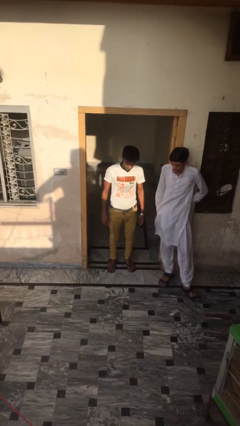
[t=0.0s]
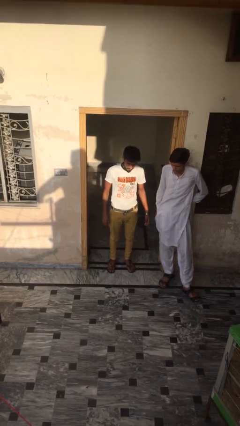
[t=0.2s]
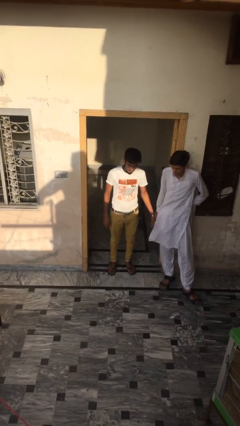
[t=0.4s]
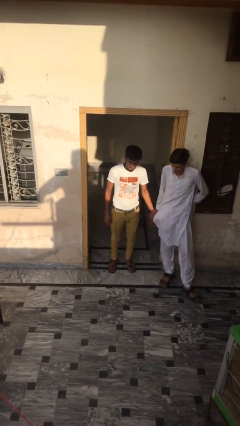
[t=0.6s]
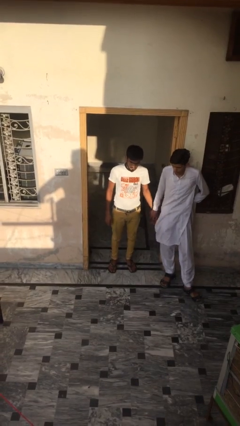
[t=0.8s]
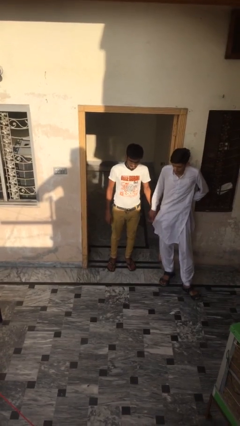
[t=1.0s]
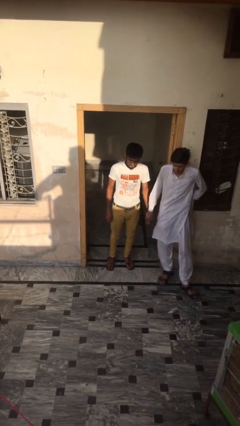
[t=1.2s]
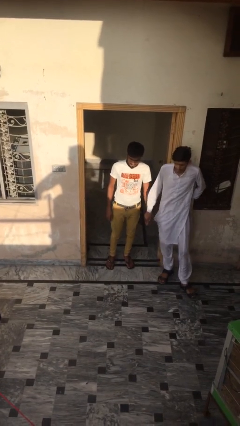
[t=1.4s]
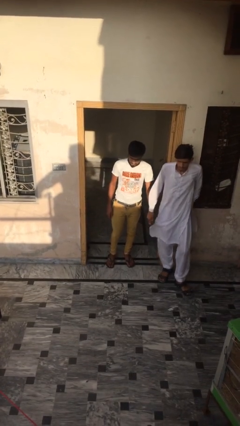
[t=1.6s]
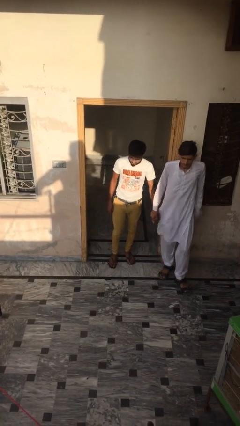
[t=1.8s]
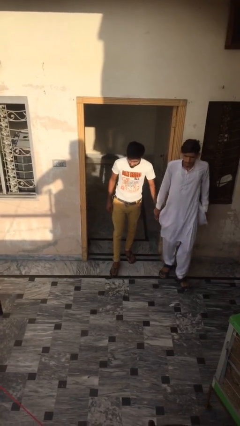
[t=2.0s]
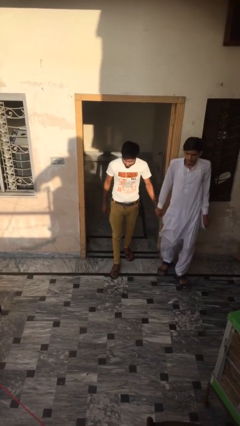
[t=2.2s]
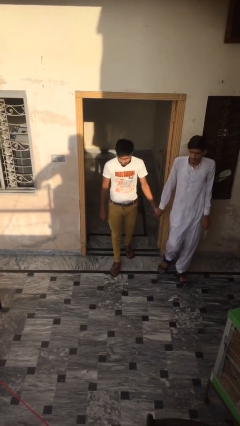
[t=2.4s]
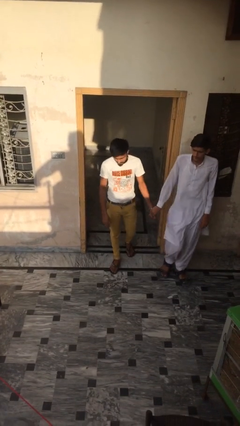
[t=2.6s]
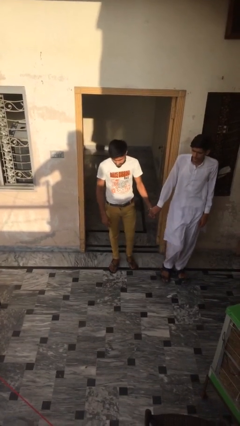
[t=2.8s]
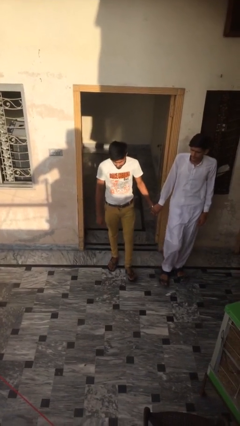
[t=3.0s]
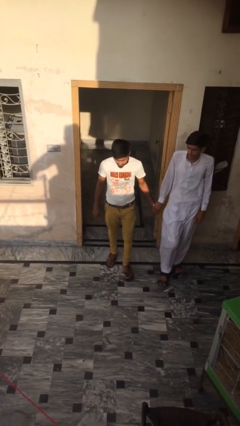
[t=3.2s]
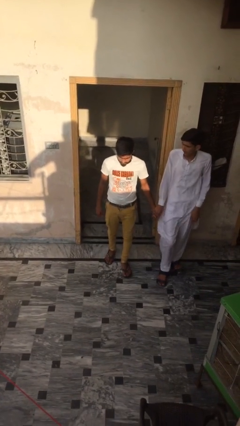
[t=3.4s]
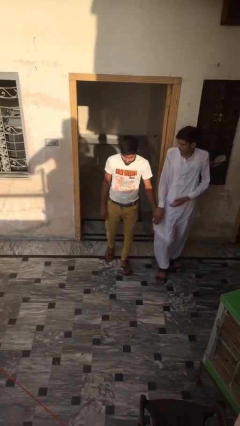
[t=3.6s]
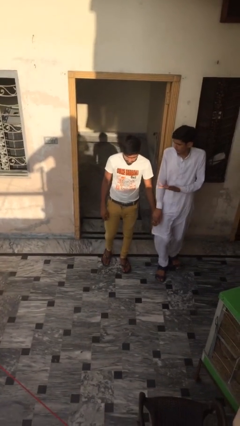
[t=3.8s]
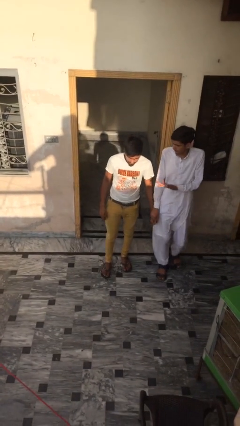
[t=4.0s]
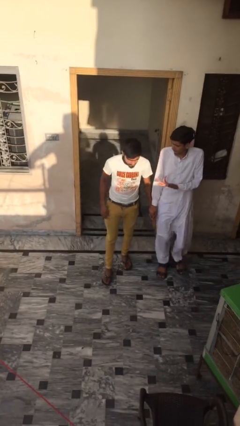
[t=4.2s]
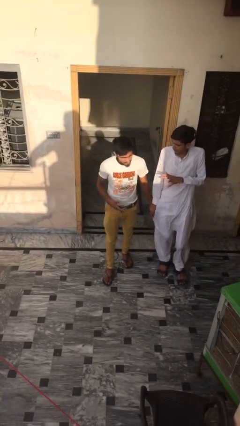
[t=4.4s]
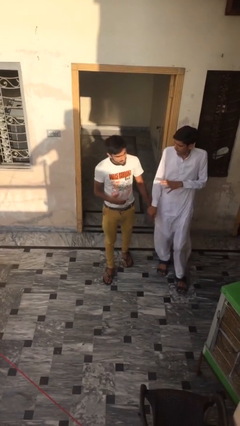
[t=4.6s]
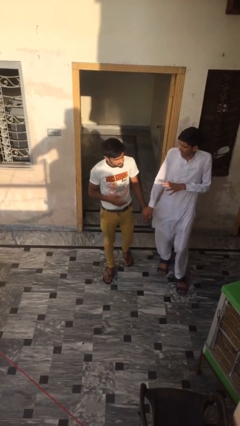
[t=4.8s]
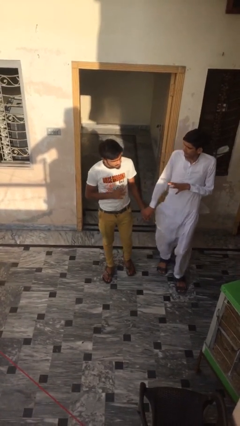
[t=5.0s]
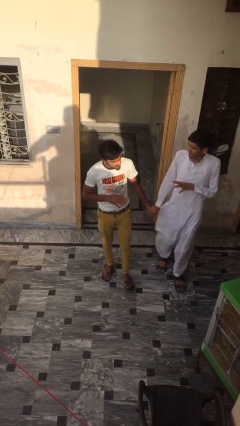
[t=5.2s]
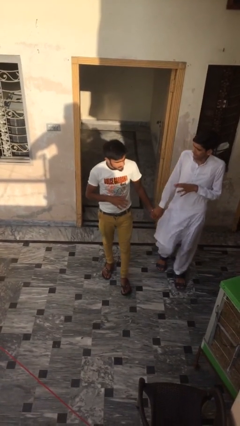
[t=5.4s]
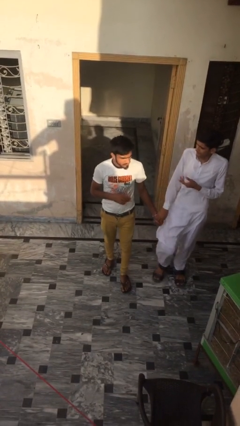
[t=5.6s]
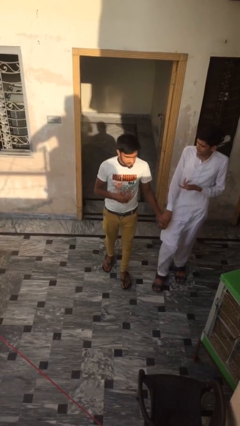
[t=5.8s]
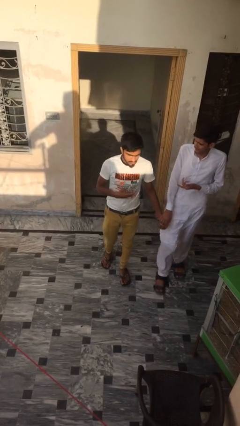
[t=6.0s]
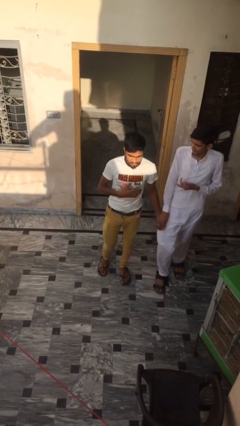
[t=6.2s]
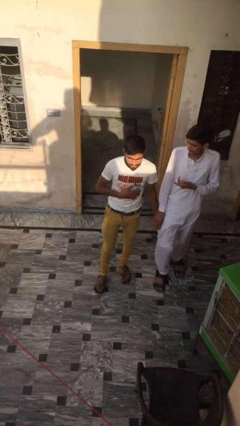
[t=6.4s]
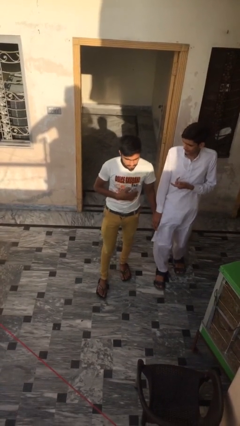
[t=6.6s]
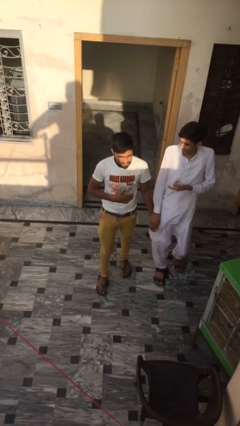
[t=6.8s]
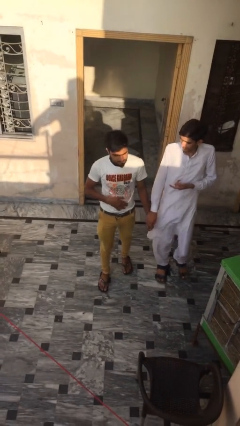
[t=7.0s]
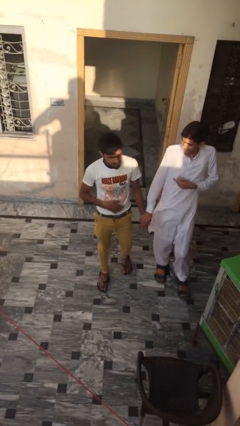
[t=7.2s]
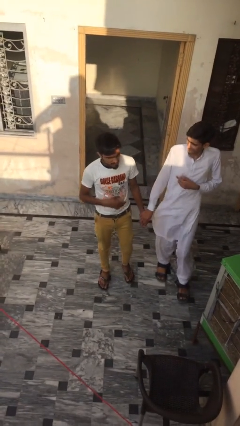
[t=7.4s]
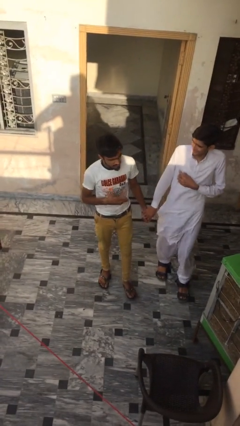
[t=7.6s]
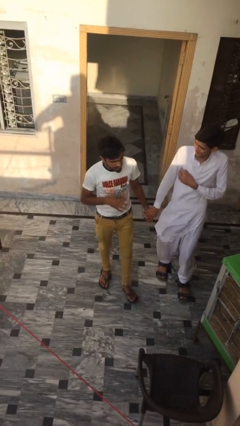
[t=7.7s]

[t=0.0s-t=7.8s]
person holds hand

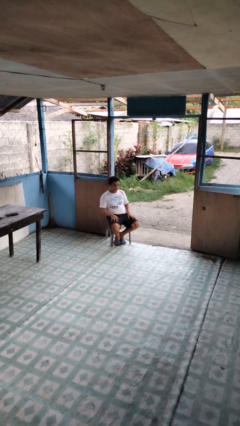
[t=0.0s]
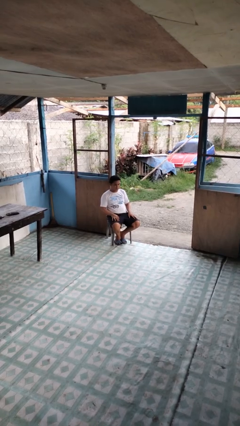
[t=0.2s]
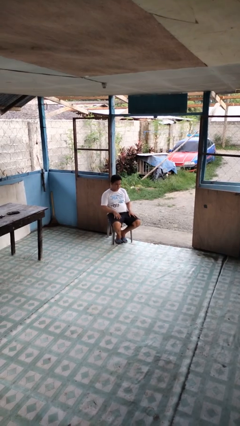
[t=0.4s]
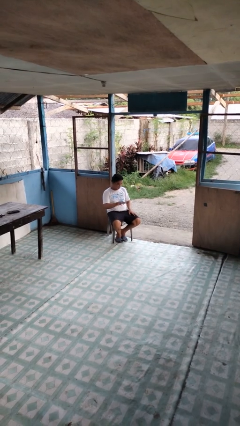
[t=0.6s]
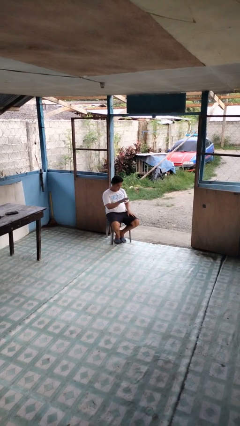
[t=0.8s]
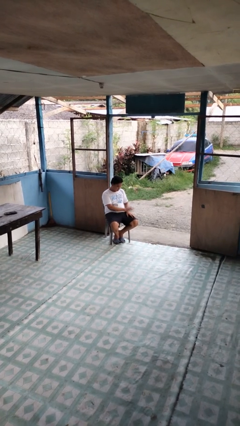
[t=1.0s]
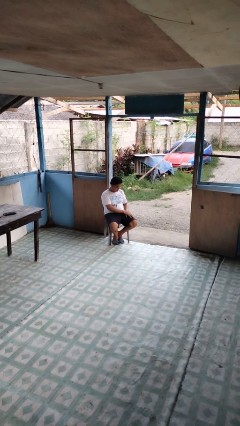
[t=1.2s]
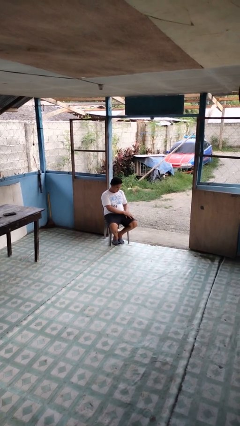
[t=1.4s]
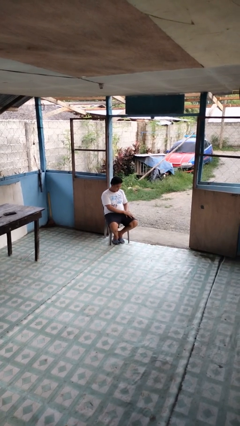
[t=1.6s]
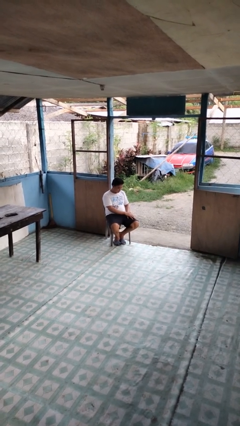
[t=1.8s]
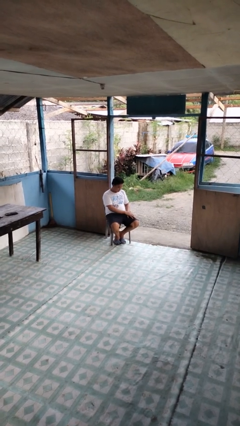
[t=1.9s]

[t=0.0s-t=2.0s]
person swats bug

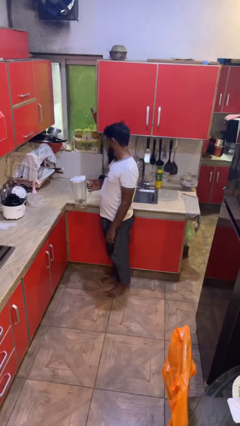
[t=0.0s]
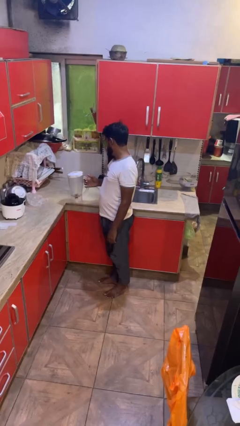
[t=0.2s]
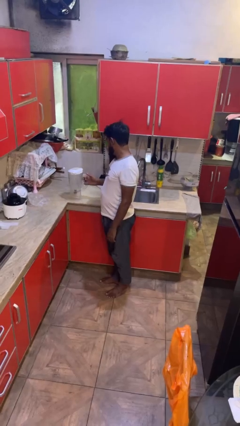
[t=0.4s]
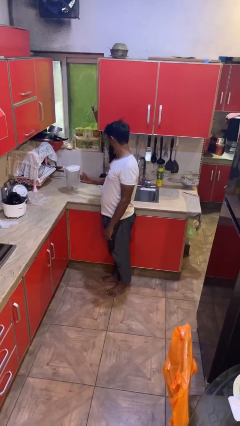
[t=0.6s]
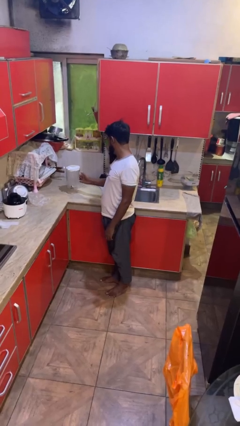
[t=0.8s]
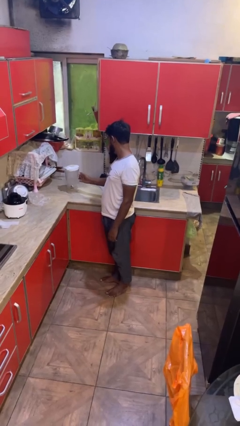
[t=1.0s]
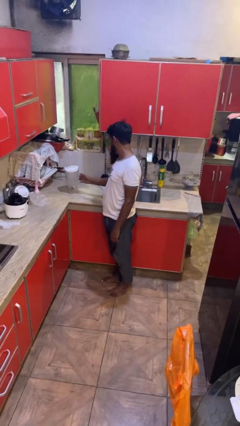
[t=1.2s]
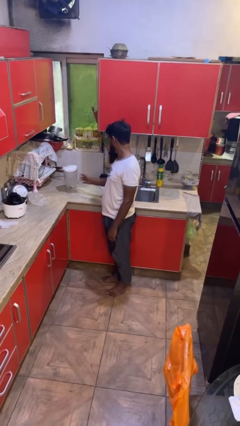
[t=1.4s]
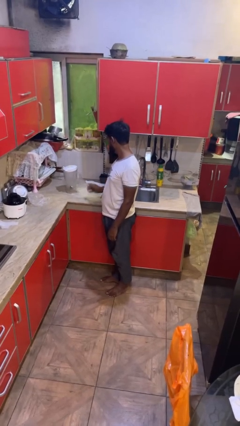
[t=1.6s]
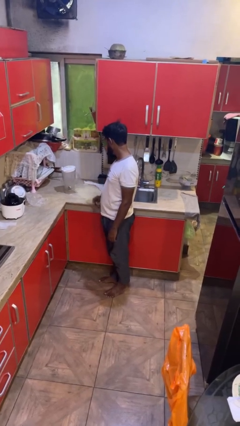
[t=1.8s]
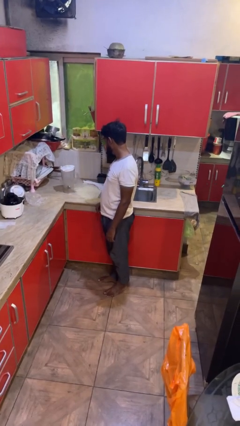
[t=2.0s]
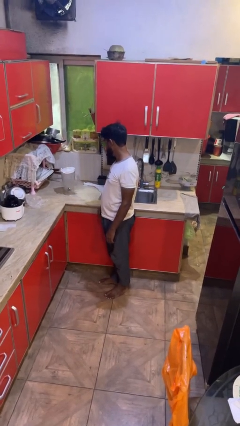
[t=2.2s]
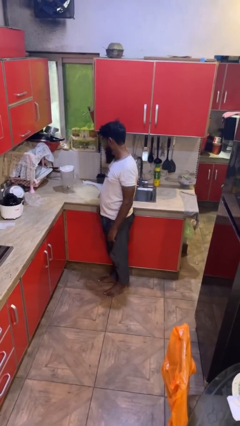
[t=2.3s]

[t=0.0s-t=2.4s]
person puts down object on countertop

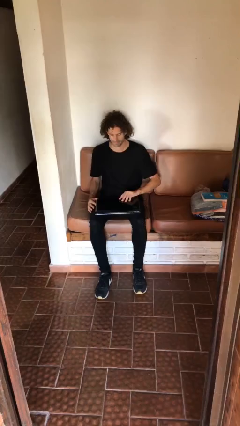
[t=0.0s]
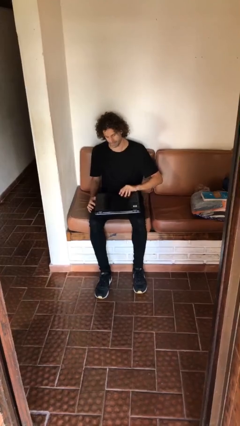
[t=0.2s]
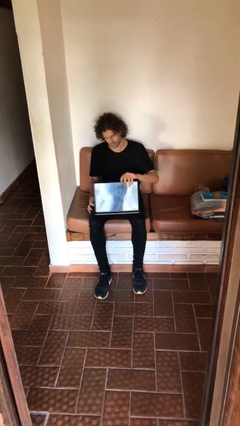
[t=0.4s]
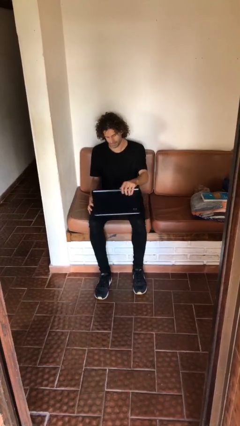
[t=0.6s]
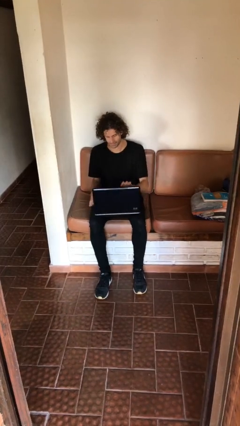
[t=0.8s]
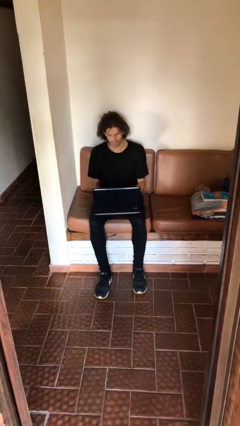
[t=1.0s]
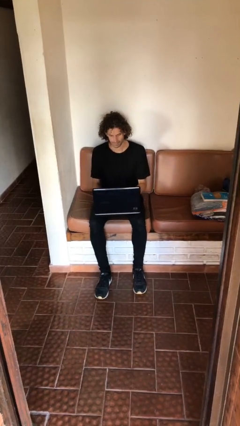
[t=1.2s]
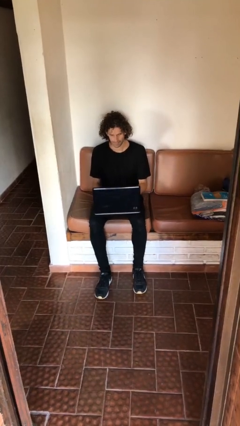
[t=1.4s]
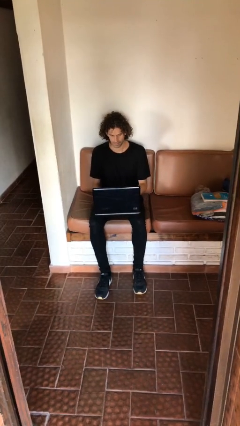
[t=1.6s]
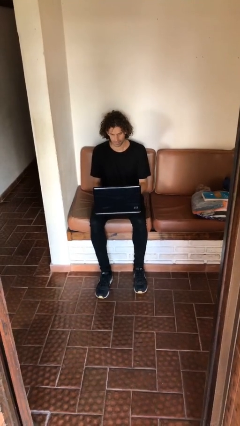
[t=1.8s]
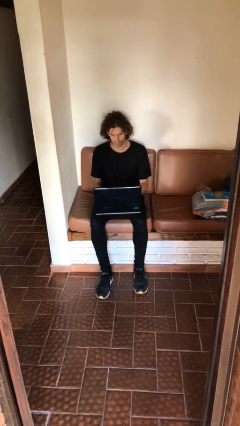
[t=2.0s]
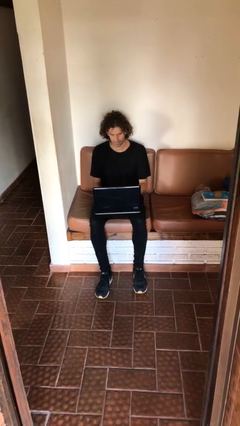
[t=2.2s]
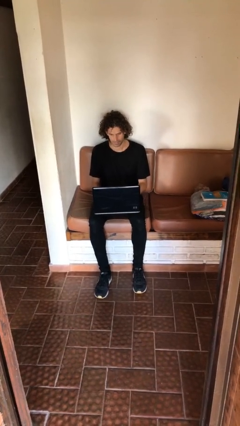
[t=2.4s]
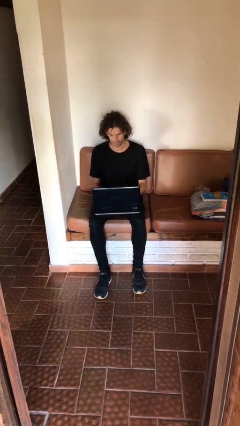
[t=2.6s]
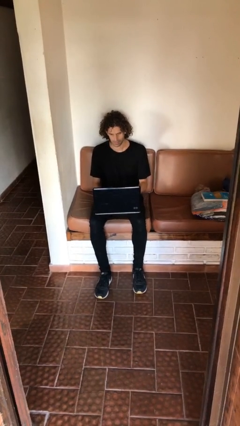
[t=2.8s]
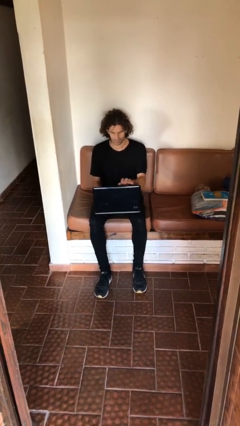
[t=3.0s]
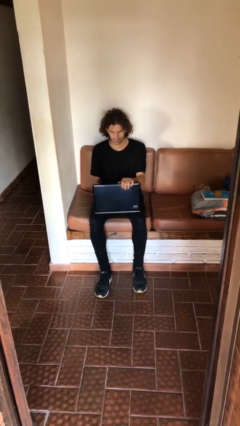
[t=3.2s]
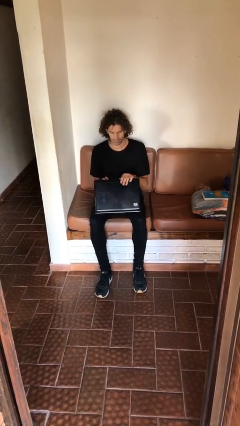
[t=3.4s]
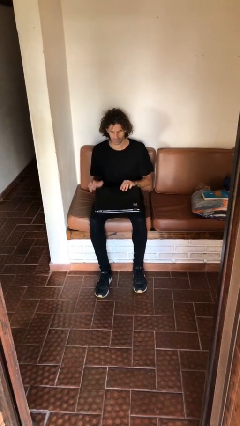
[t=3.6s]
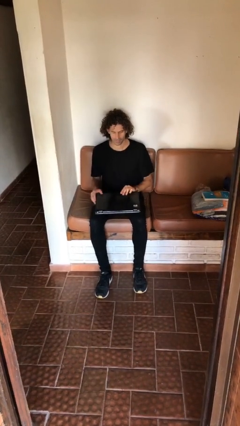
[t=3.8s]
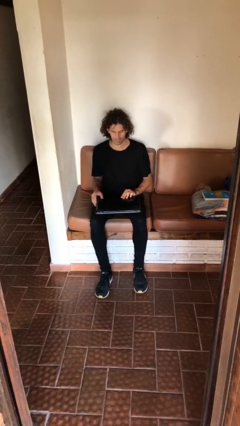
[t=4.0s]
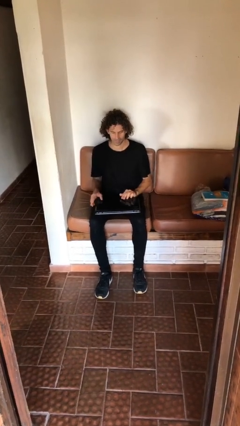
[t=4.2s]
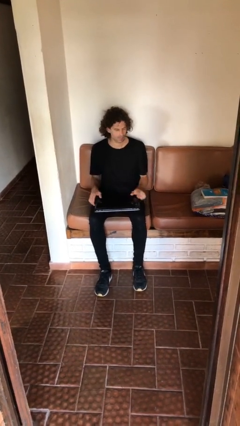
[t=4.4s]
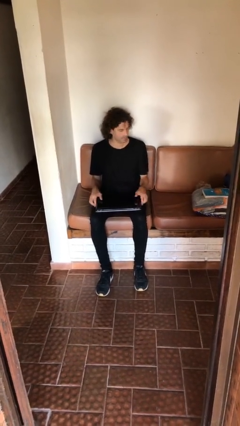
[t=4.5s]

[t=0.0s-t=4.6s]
person interacts with laptop

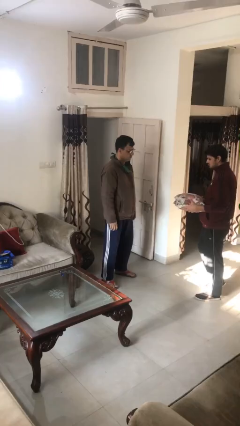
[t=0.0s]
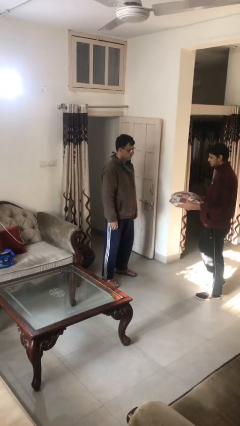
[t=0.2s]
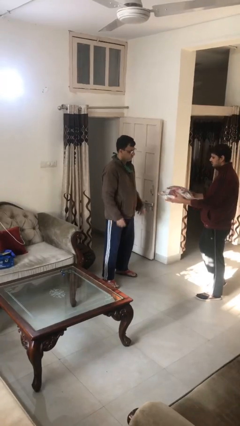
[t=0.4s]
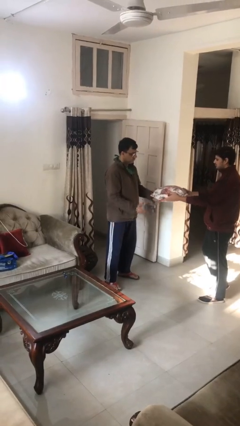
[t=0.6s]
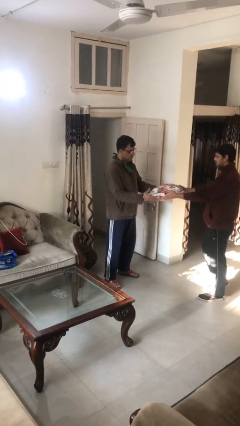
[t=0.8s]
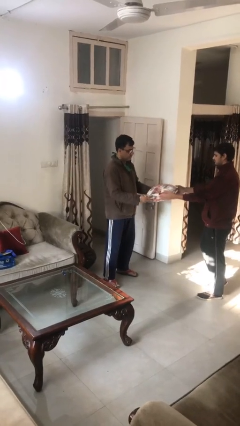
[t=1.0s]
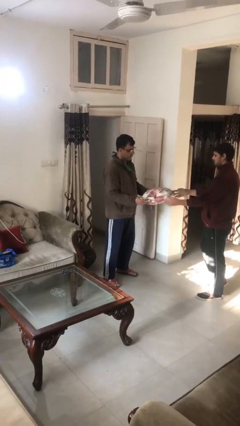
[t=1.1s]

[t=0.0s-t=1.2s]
person transfers object to person
